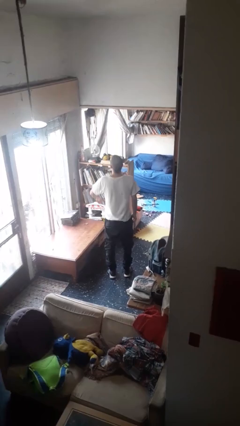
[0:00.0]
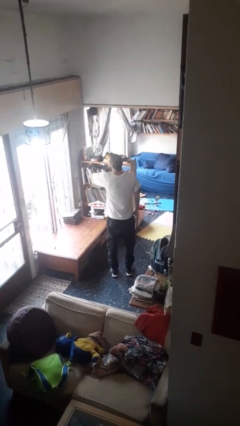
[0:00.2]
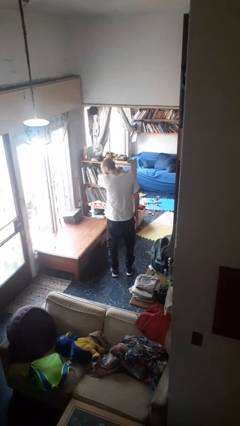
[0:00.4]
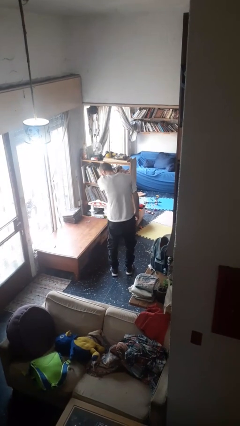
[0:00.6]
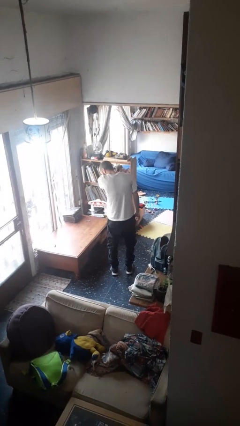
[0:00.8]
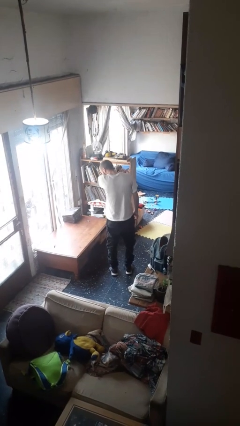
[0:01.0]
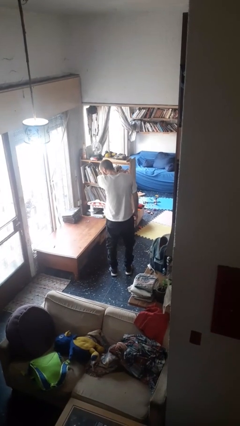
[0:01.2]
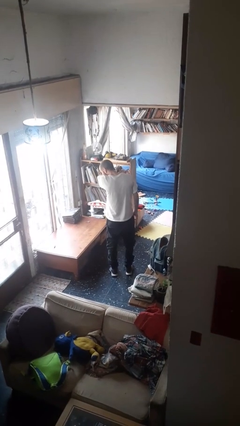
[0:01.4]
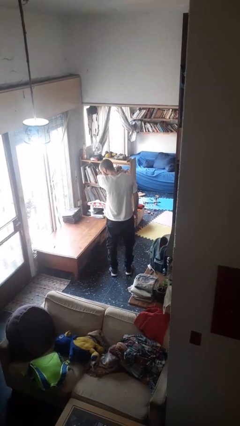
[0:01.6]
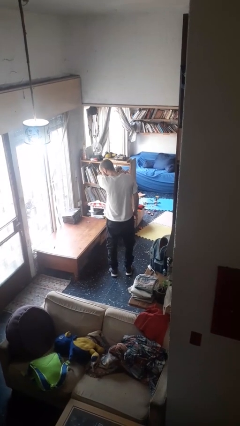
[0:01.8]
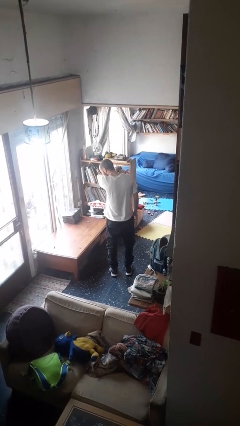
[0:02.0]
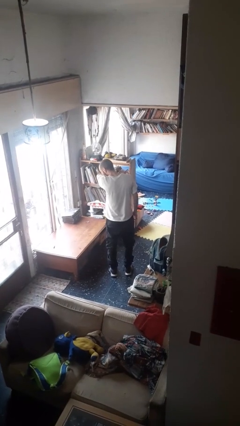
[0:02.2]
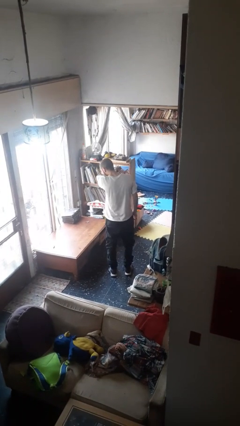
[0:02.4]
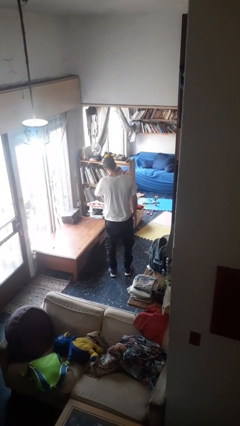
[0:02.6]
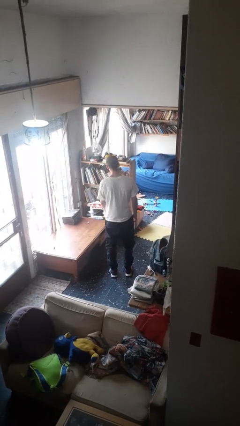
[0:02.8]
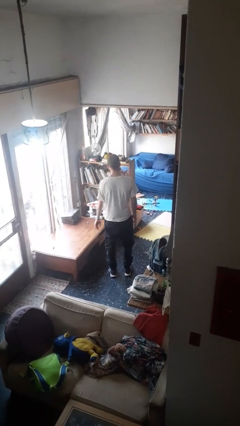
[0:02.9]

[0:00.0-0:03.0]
person sneezes into arm

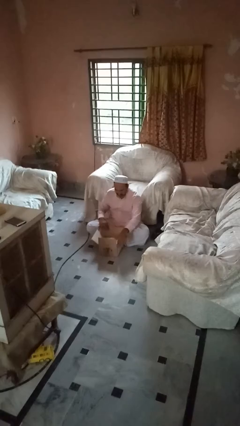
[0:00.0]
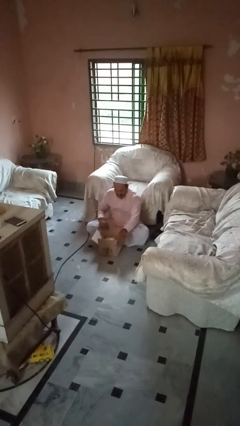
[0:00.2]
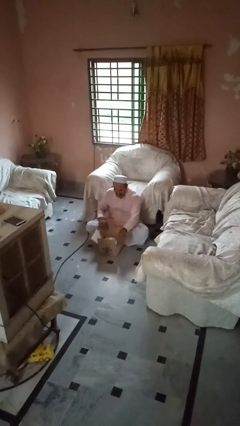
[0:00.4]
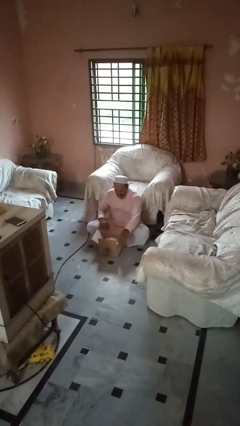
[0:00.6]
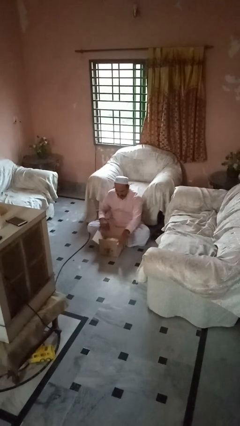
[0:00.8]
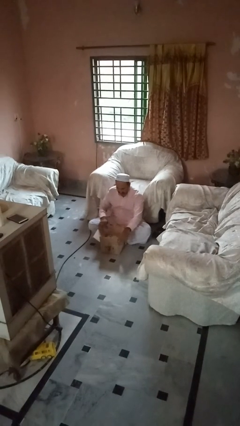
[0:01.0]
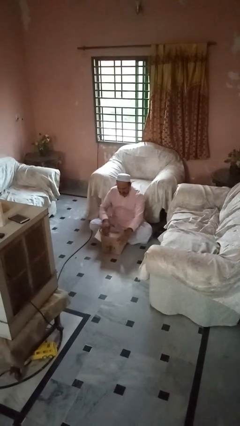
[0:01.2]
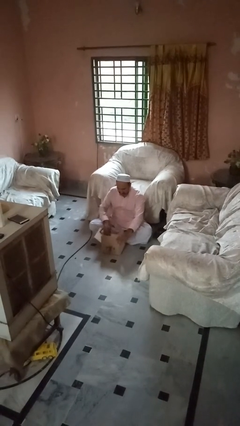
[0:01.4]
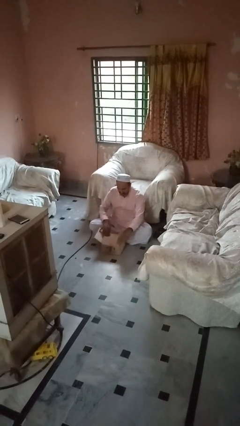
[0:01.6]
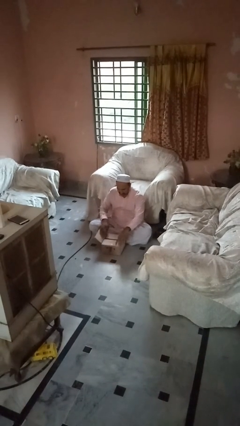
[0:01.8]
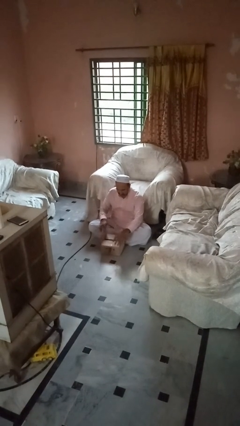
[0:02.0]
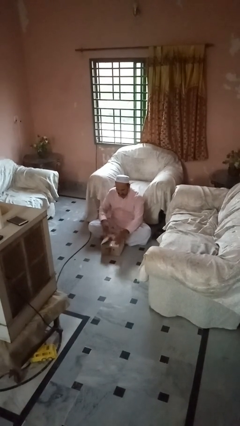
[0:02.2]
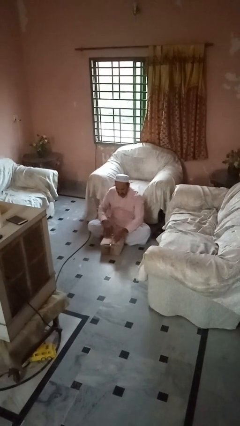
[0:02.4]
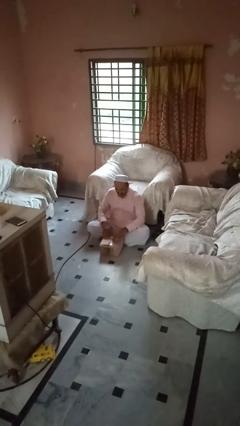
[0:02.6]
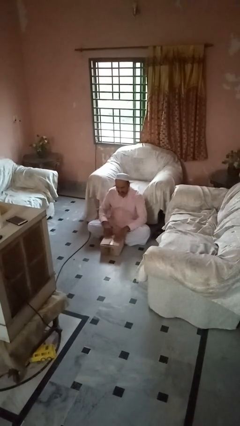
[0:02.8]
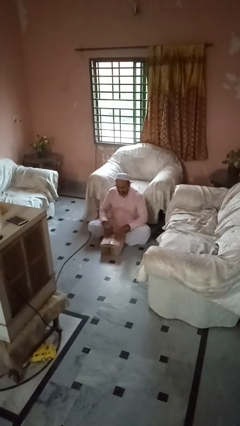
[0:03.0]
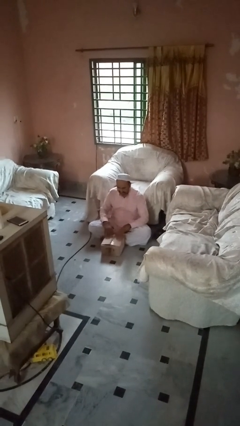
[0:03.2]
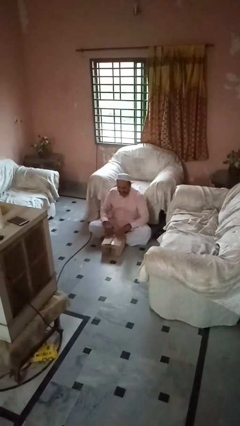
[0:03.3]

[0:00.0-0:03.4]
person closes box

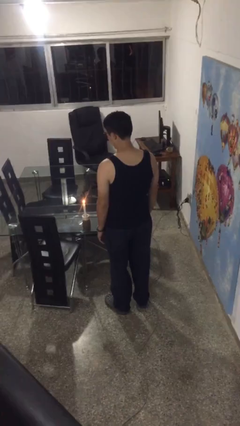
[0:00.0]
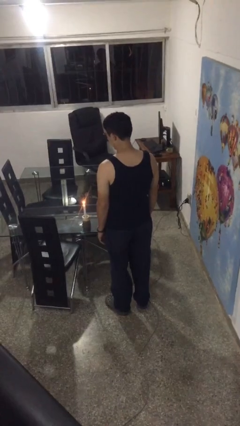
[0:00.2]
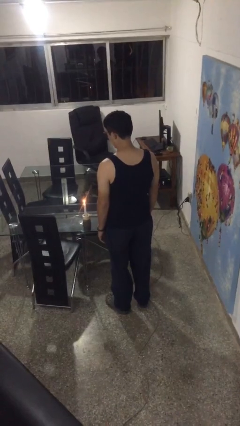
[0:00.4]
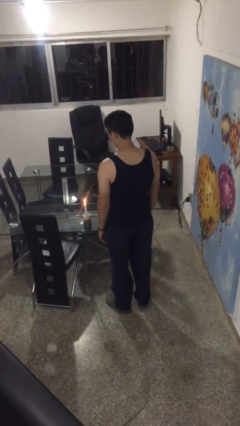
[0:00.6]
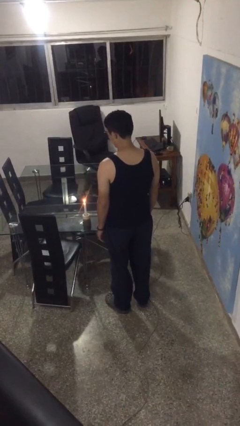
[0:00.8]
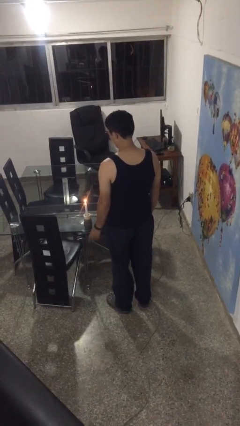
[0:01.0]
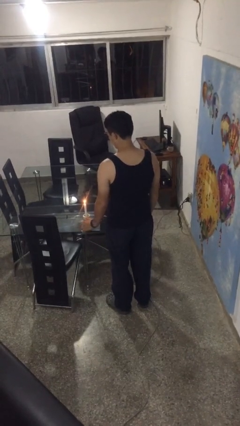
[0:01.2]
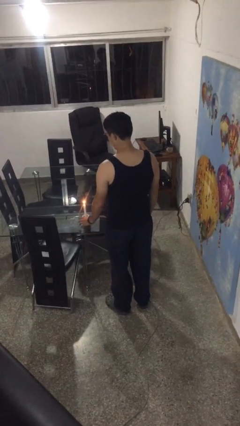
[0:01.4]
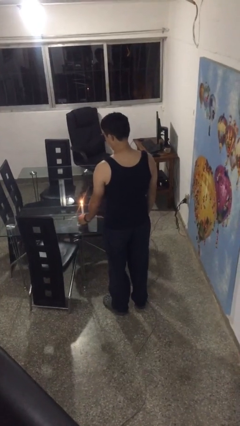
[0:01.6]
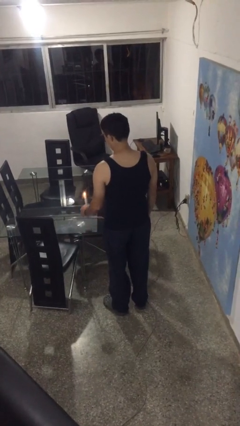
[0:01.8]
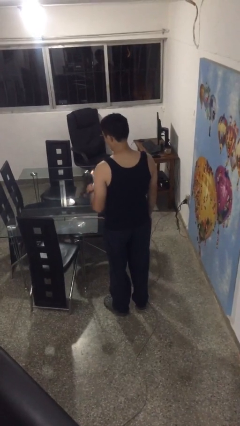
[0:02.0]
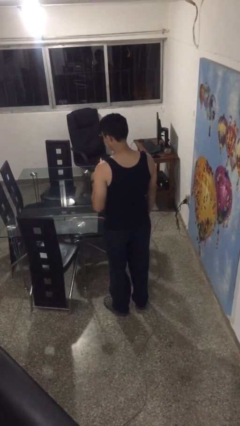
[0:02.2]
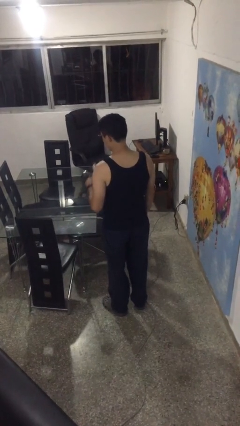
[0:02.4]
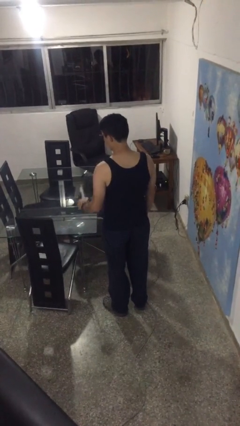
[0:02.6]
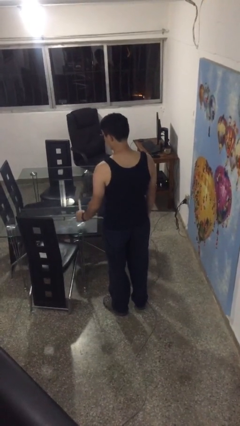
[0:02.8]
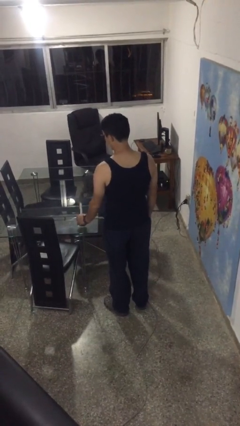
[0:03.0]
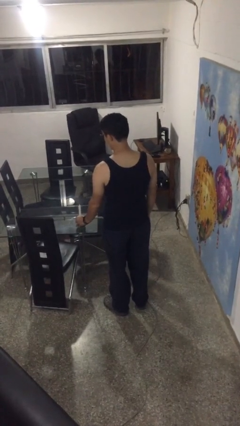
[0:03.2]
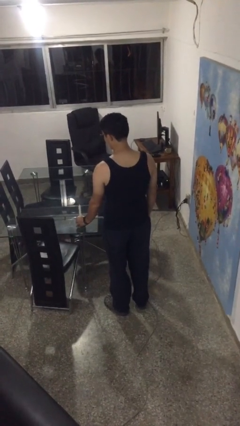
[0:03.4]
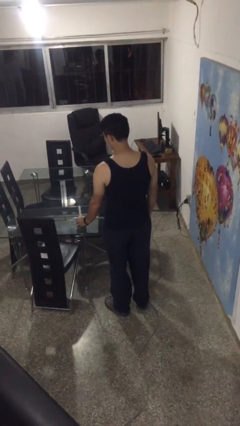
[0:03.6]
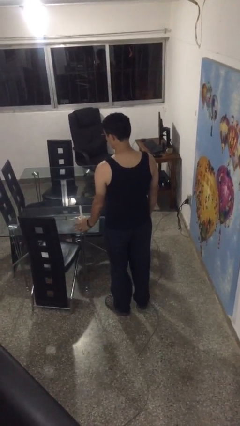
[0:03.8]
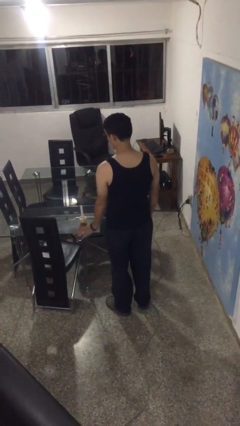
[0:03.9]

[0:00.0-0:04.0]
person extinguishes candle

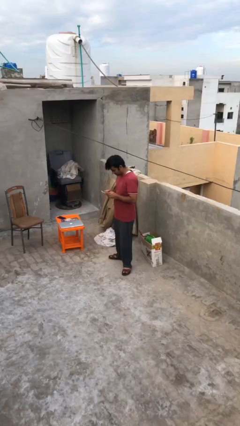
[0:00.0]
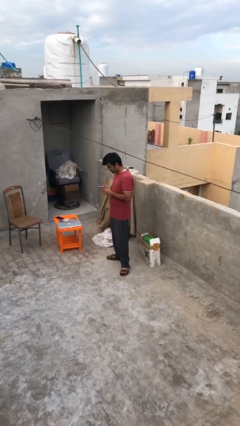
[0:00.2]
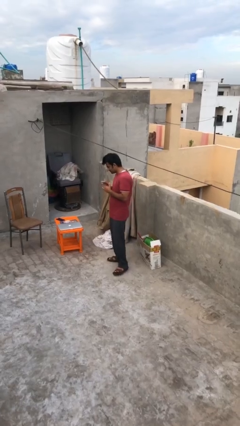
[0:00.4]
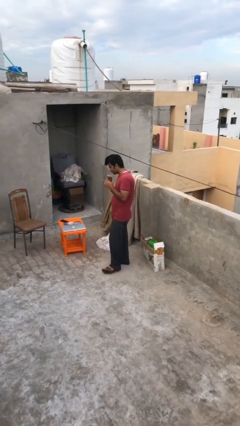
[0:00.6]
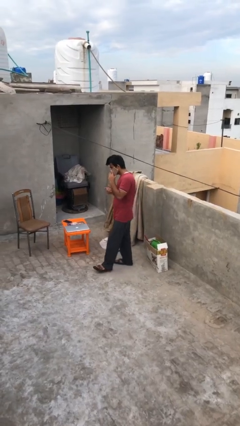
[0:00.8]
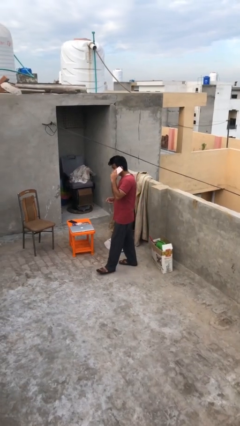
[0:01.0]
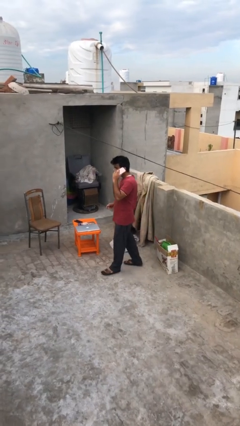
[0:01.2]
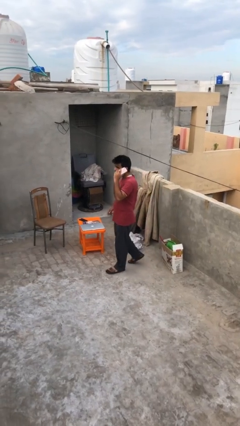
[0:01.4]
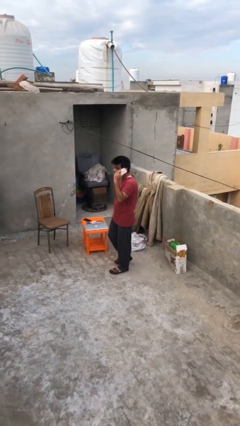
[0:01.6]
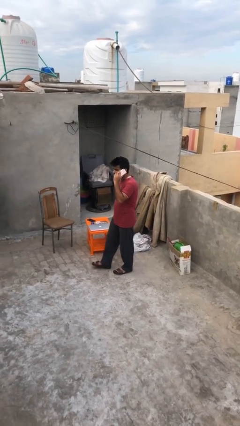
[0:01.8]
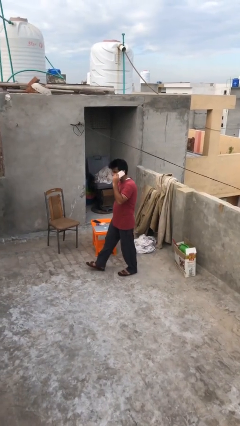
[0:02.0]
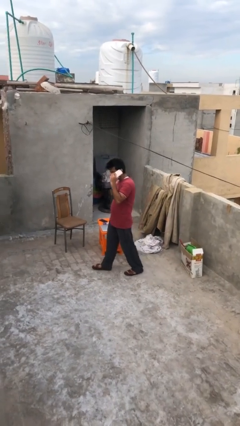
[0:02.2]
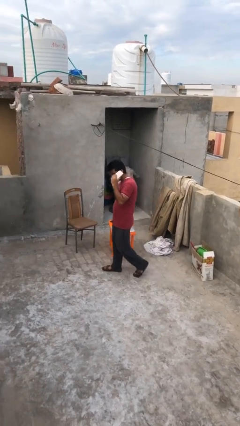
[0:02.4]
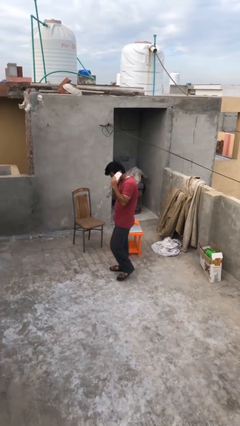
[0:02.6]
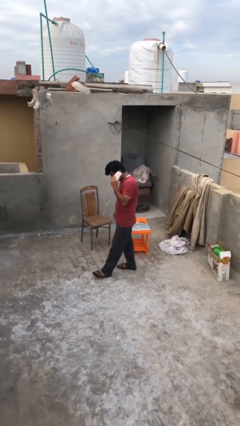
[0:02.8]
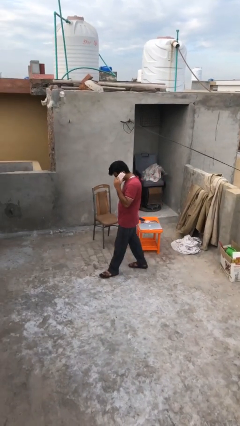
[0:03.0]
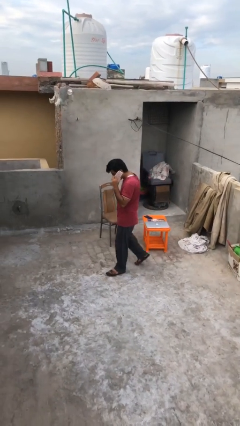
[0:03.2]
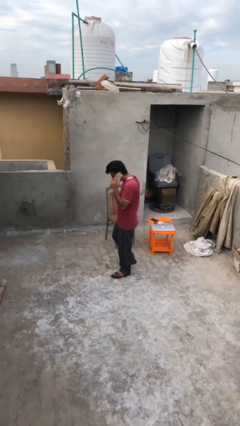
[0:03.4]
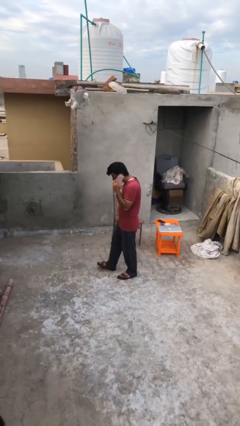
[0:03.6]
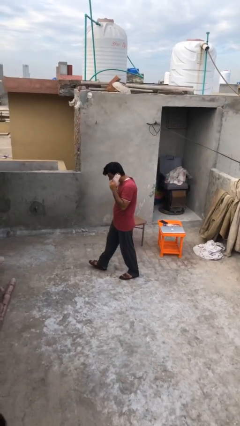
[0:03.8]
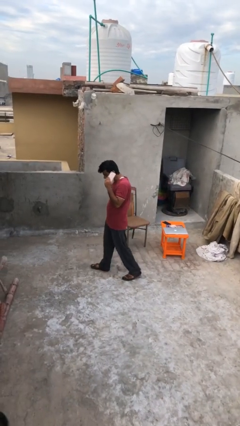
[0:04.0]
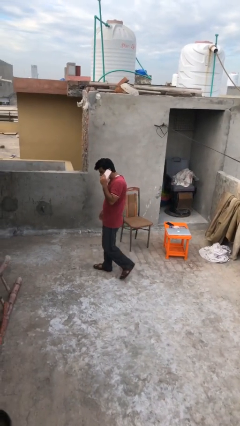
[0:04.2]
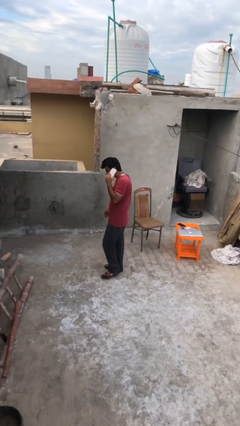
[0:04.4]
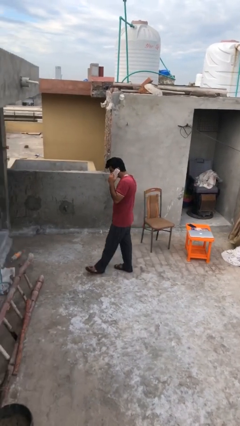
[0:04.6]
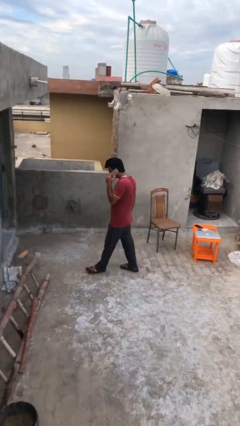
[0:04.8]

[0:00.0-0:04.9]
person talks on phone

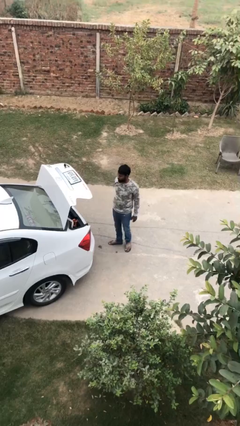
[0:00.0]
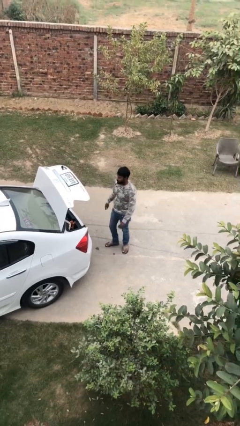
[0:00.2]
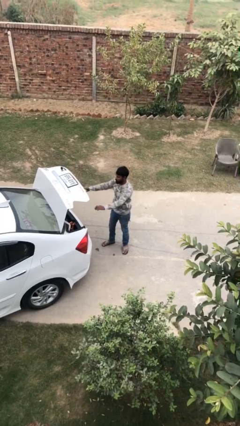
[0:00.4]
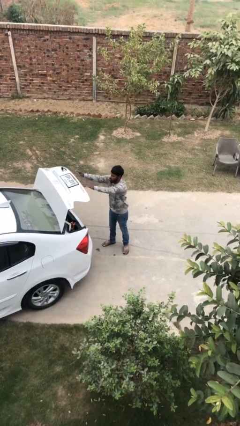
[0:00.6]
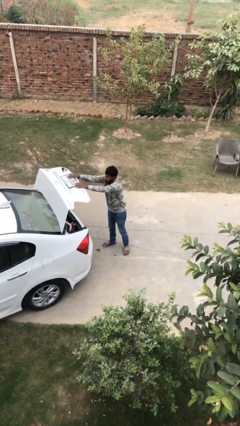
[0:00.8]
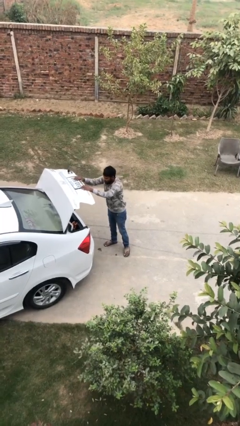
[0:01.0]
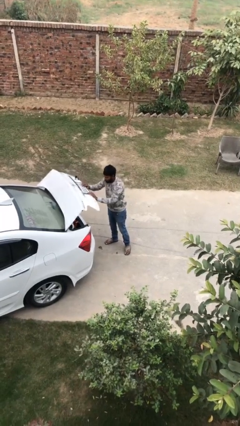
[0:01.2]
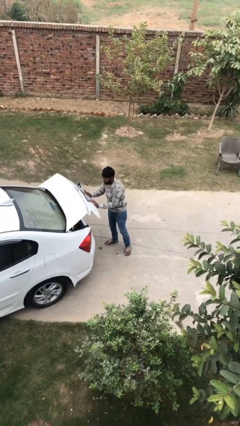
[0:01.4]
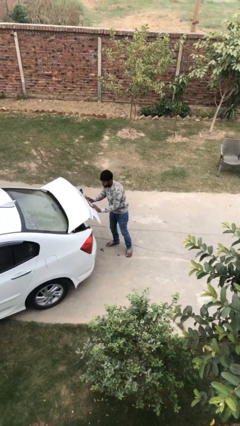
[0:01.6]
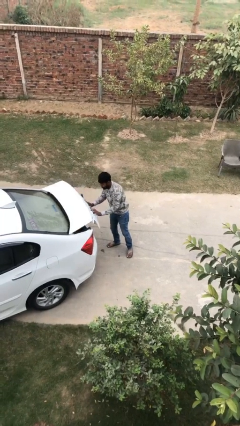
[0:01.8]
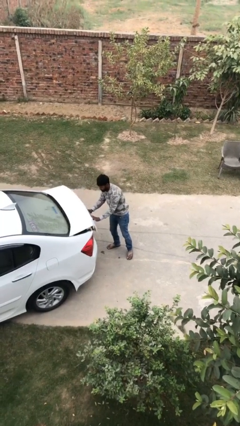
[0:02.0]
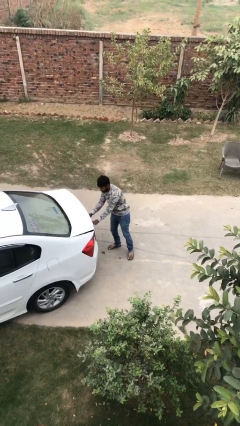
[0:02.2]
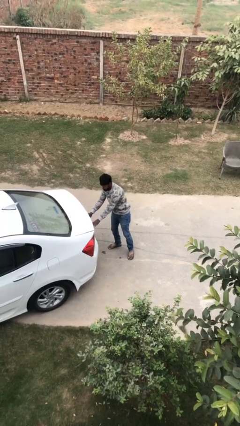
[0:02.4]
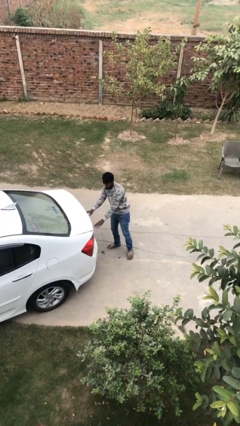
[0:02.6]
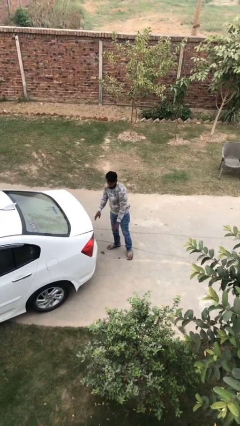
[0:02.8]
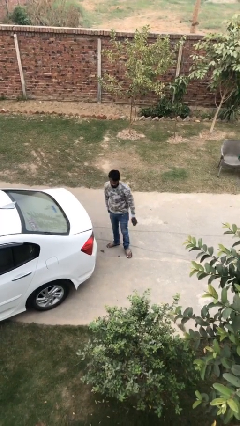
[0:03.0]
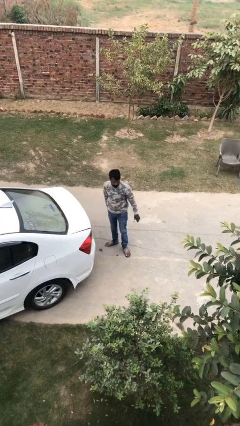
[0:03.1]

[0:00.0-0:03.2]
person closes car trunk
